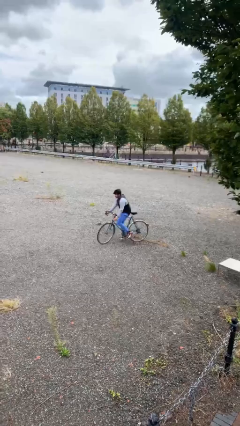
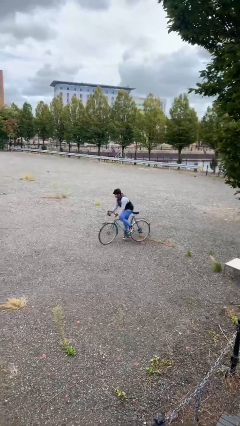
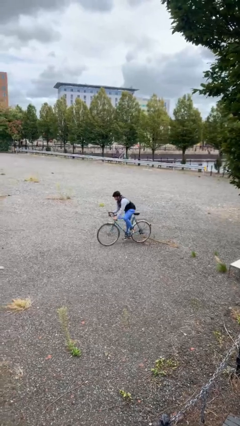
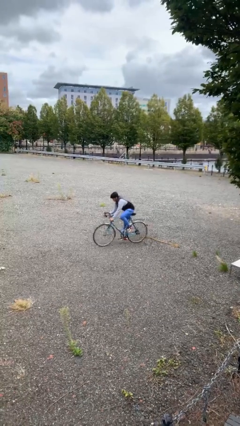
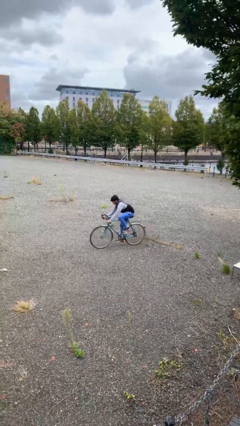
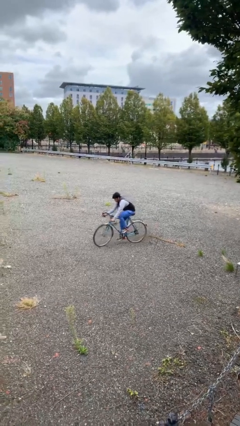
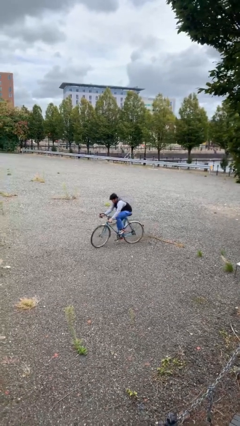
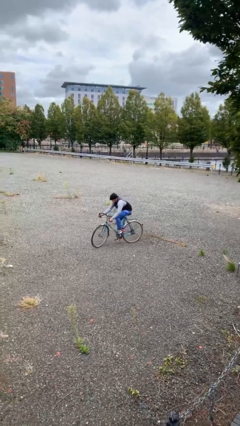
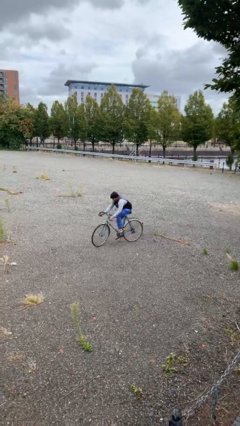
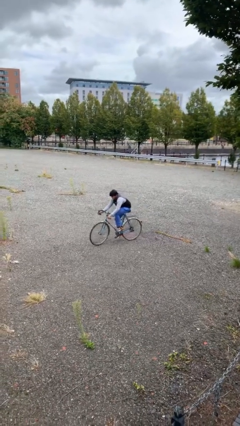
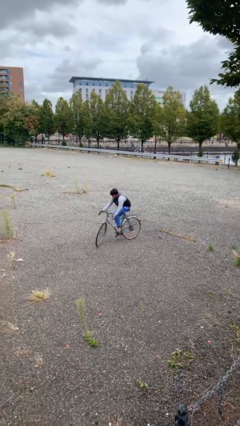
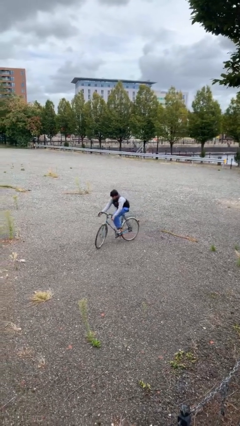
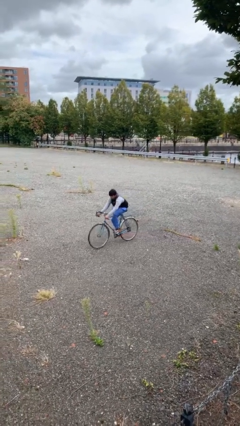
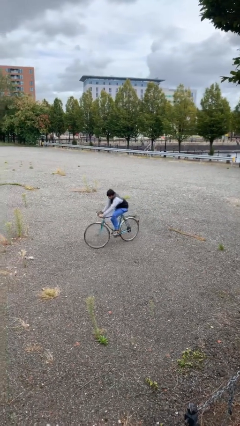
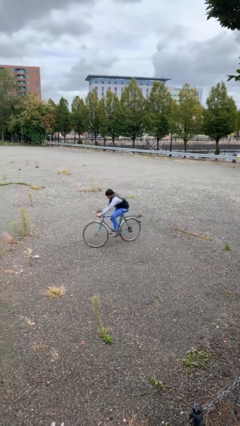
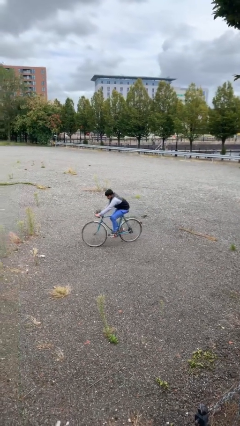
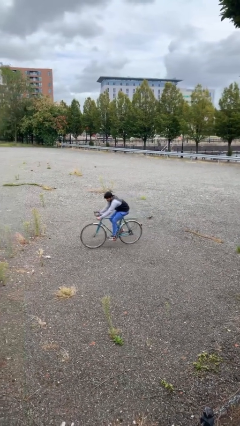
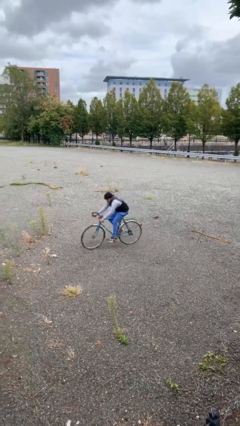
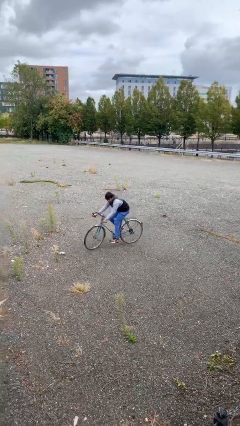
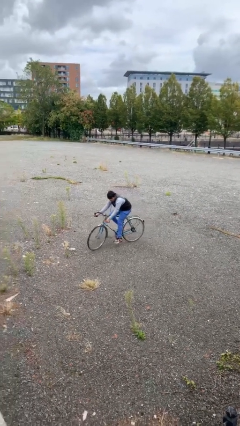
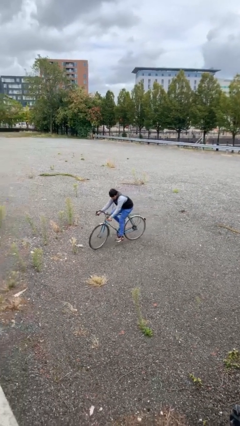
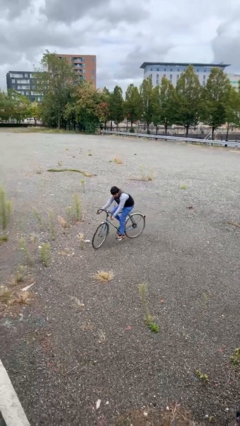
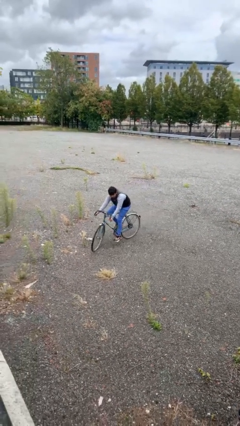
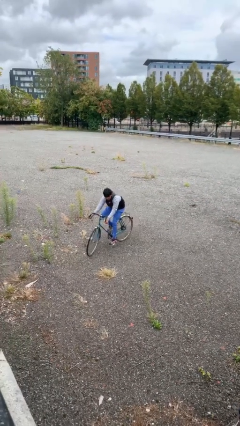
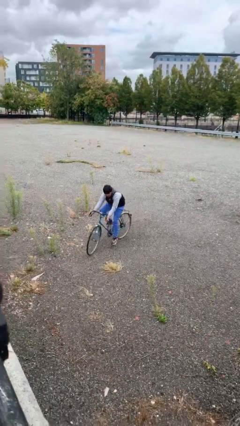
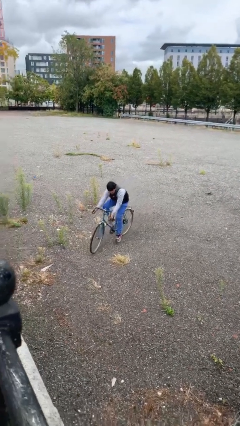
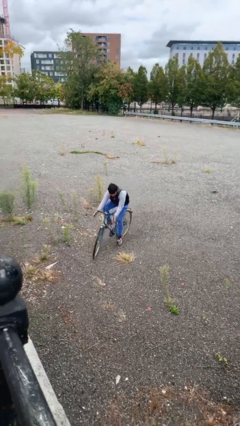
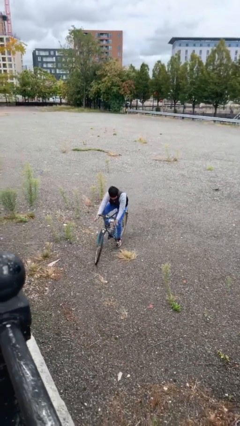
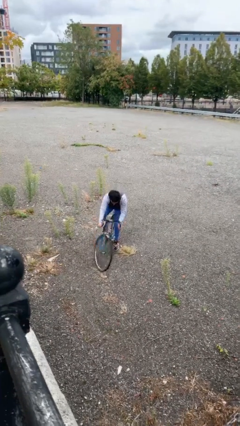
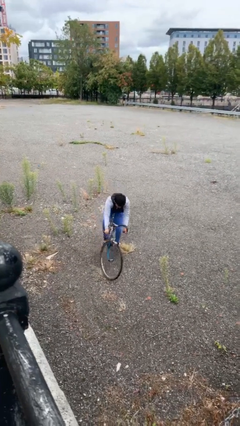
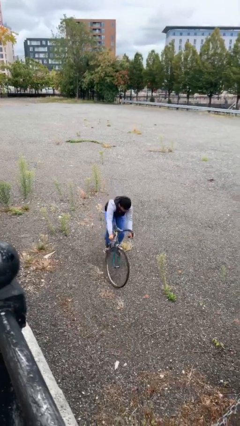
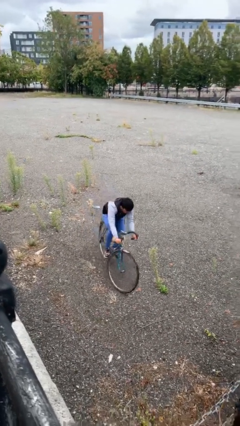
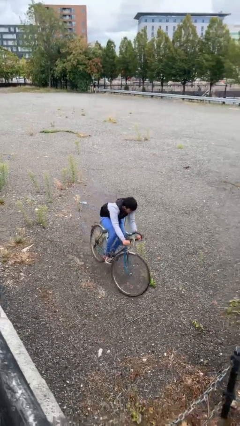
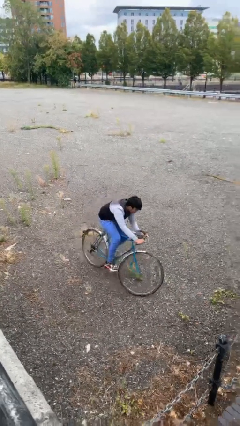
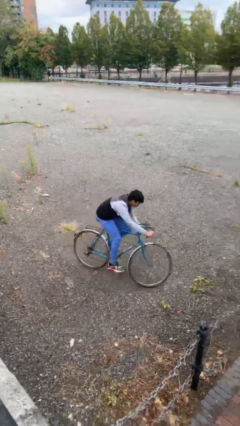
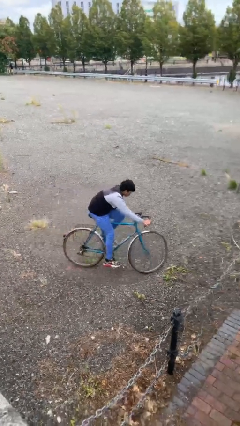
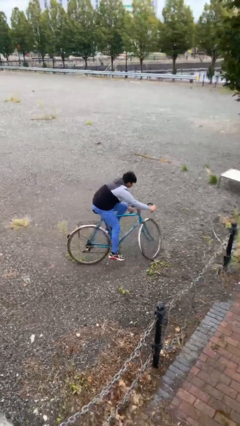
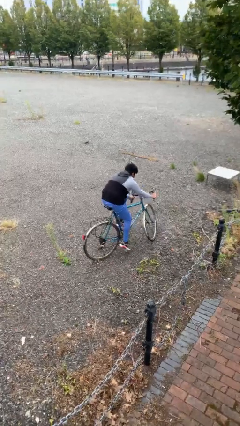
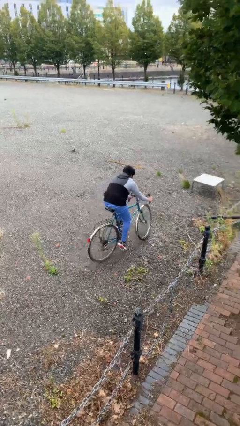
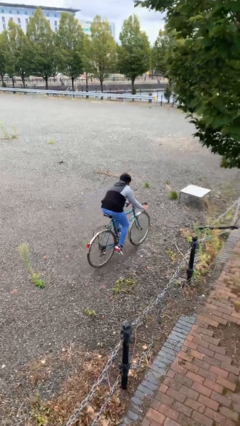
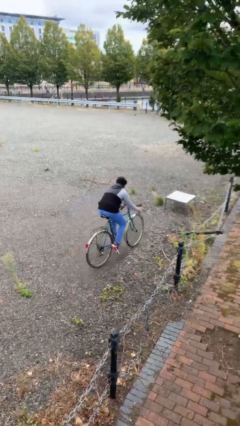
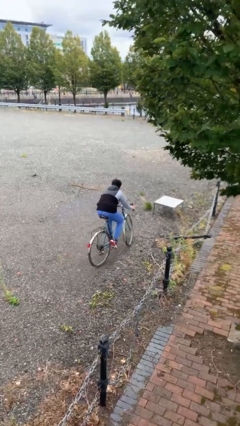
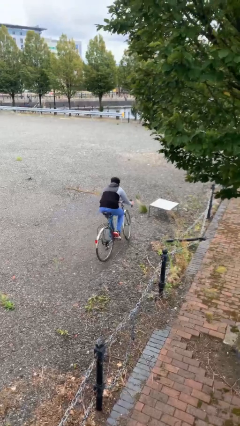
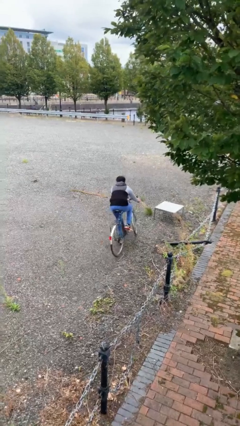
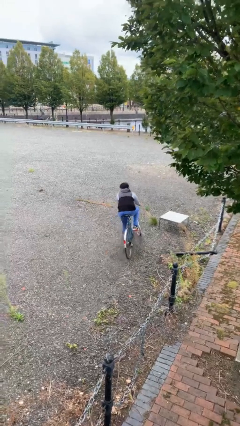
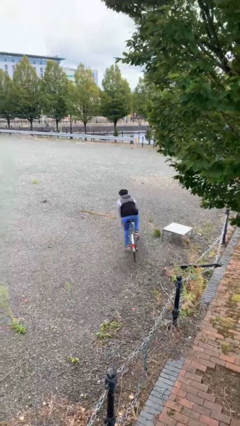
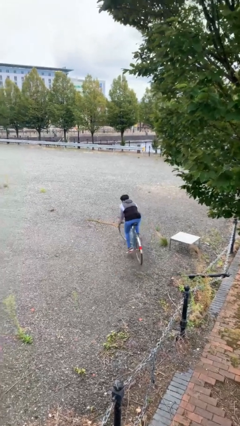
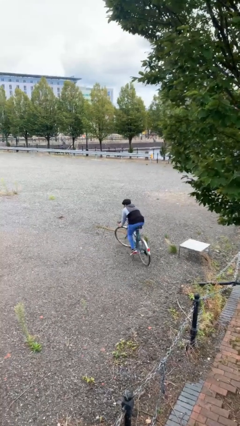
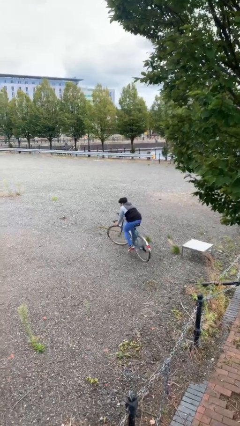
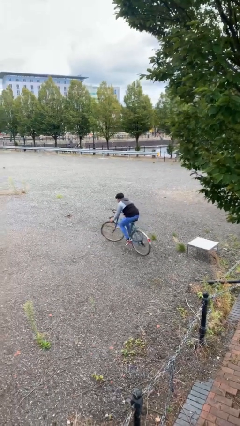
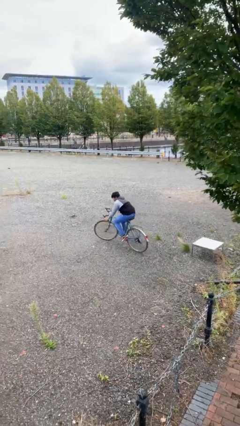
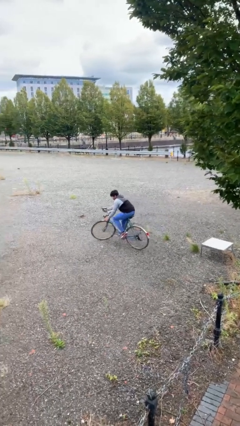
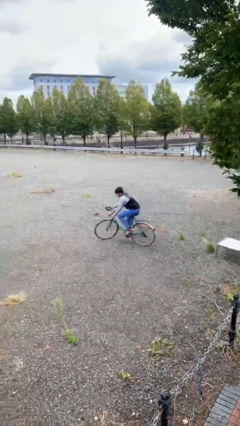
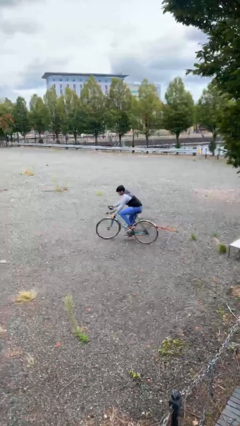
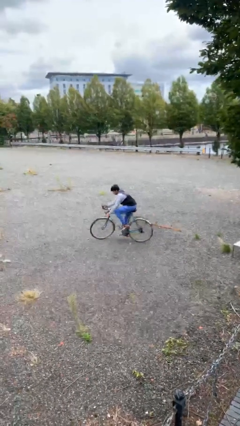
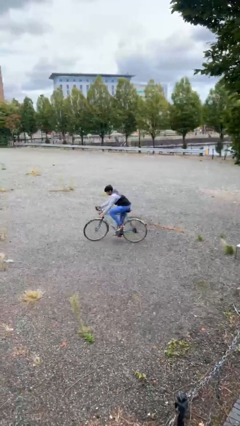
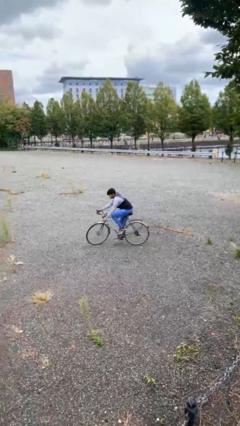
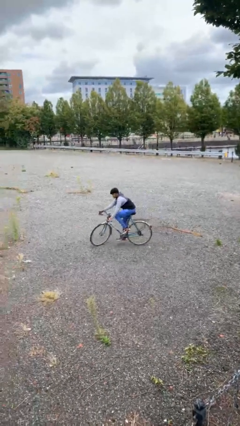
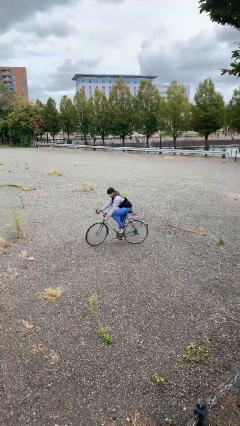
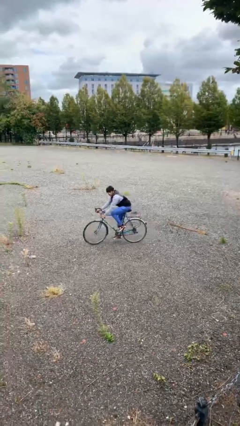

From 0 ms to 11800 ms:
person rides bicycle

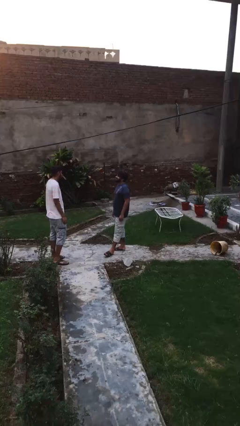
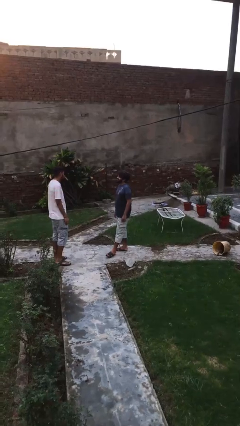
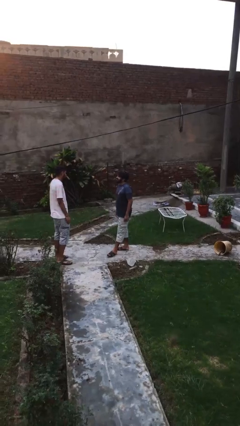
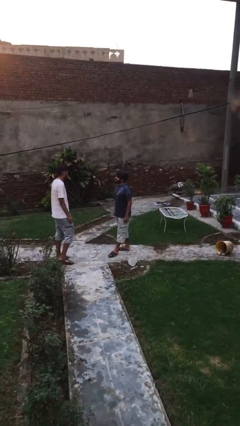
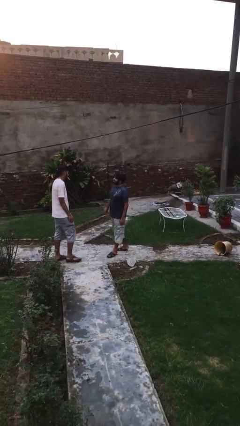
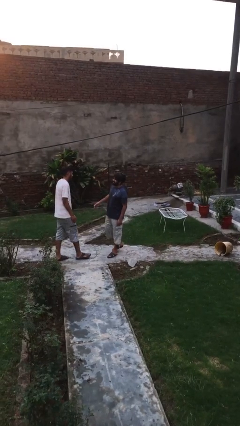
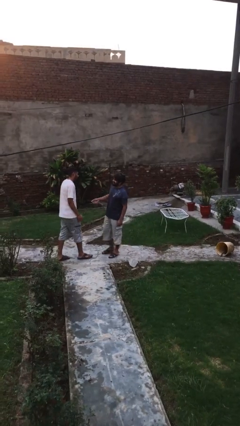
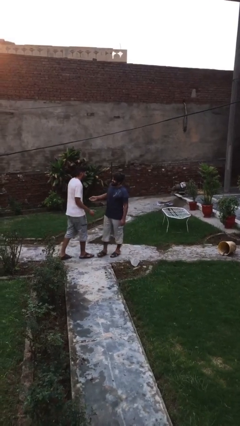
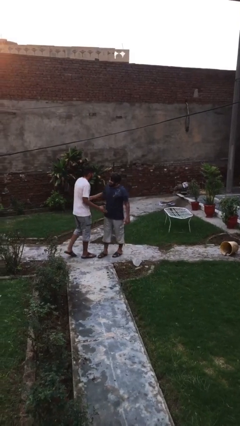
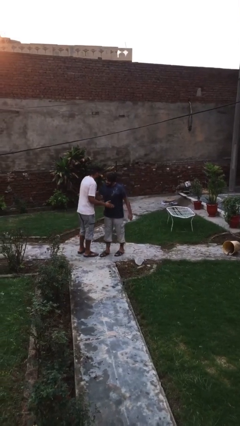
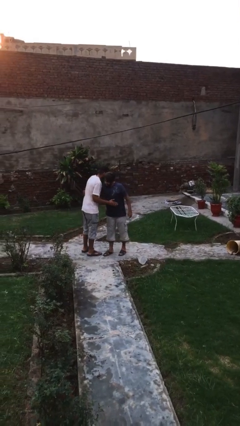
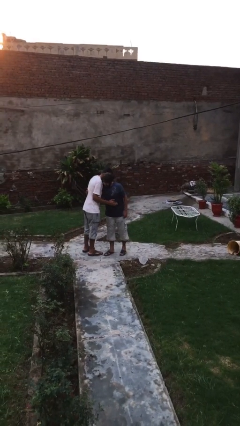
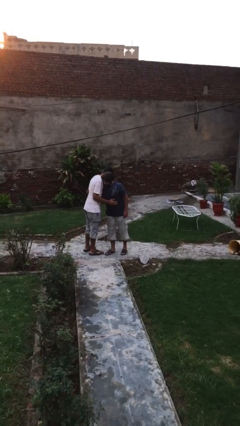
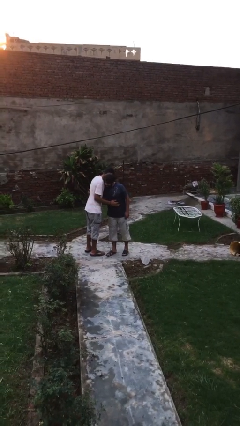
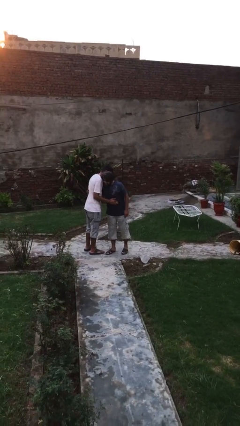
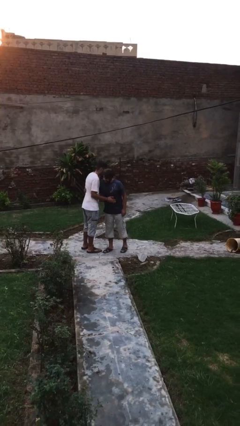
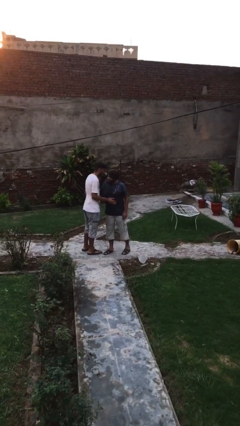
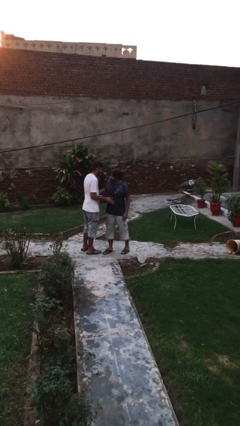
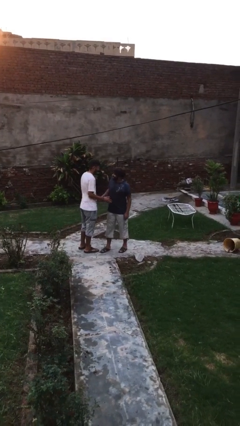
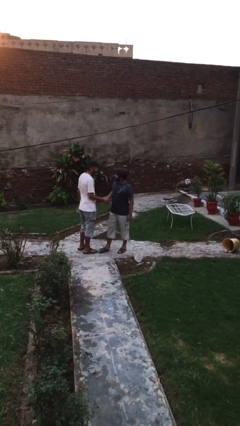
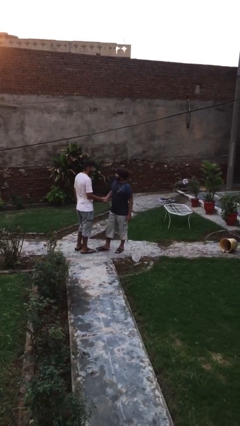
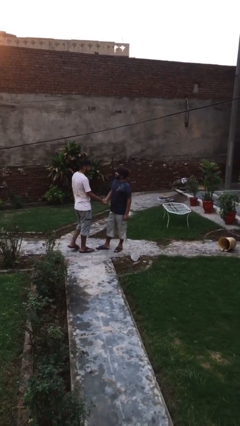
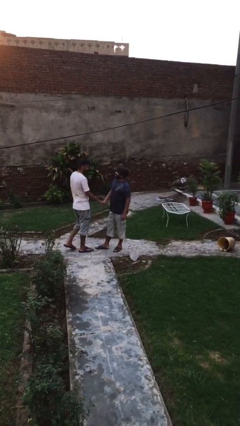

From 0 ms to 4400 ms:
person embraces person

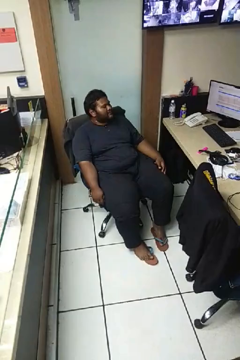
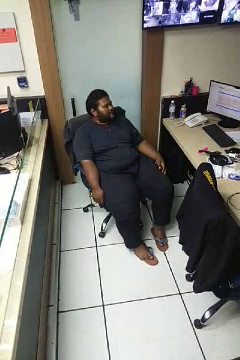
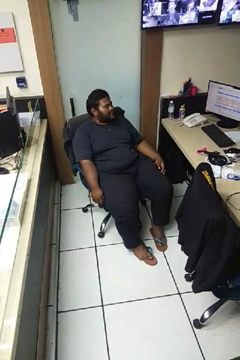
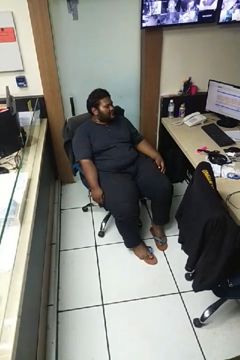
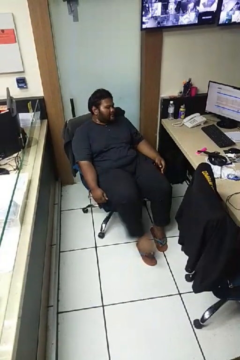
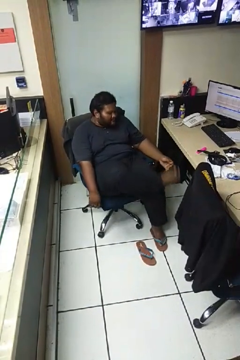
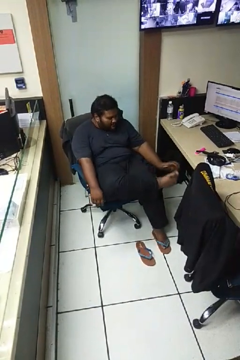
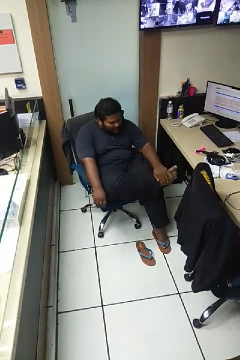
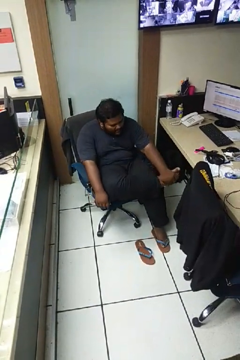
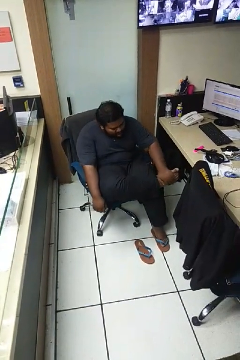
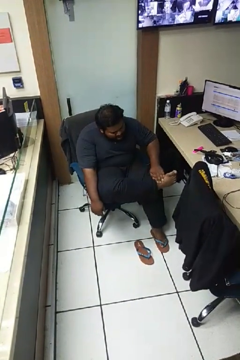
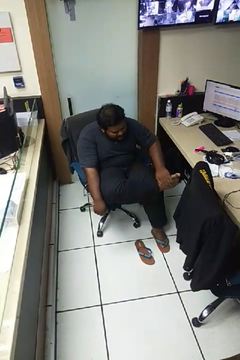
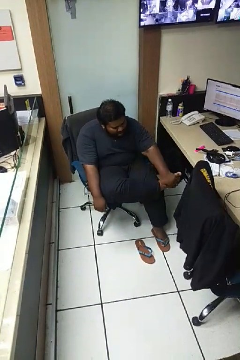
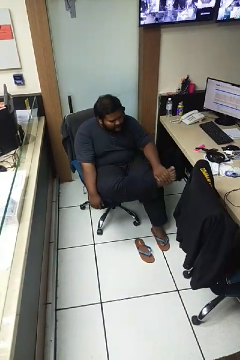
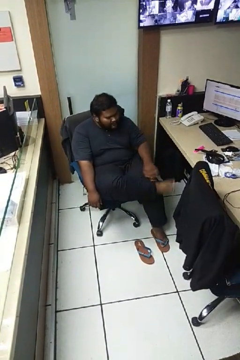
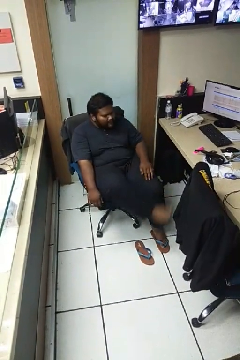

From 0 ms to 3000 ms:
person rubs foot
